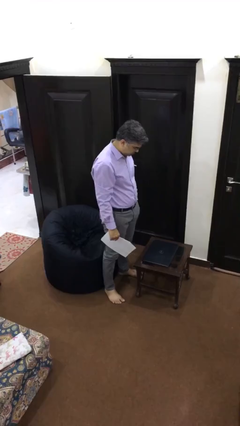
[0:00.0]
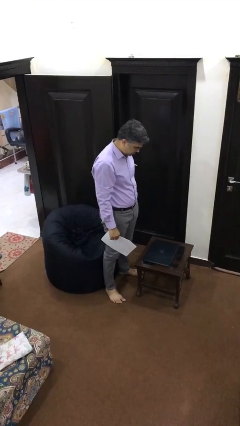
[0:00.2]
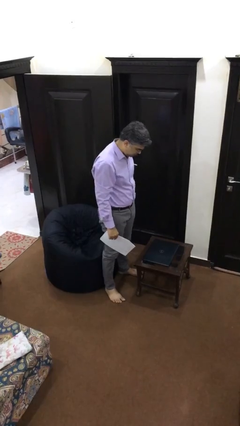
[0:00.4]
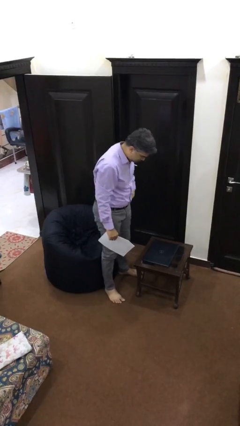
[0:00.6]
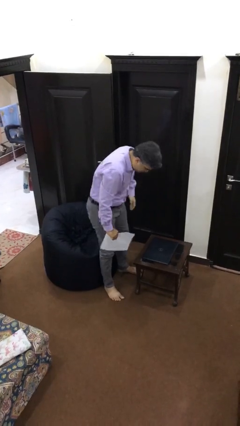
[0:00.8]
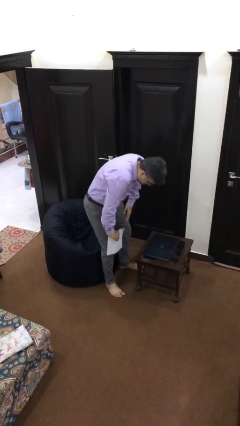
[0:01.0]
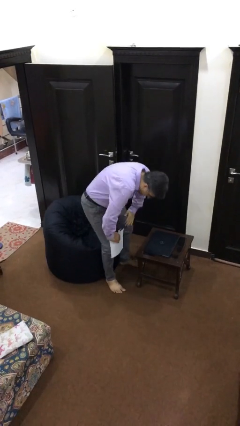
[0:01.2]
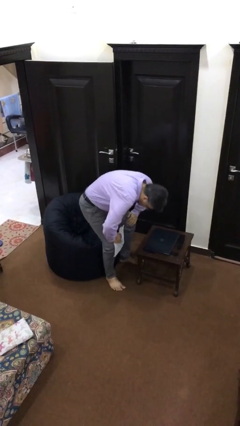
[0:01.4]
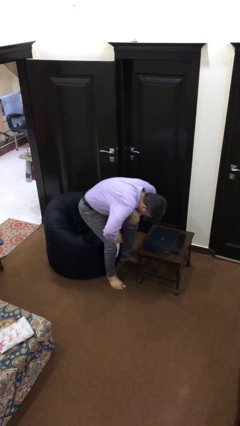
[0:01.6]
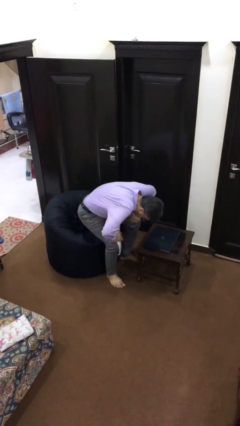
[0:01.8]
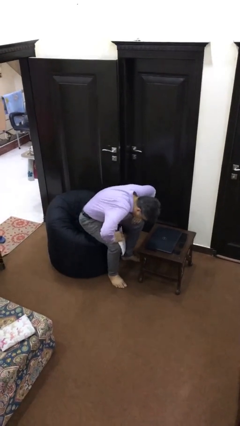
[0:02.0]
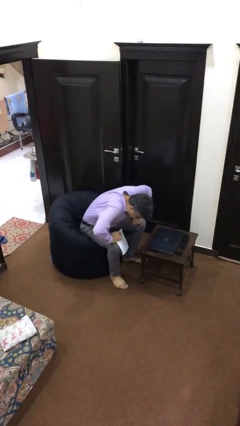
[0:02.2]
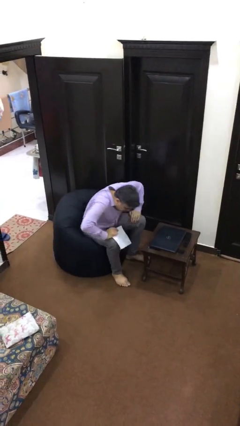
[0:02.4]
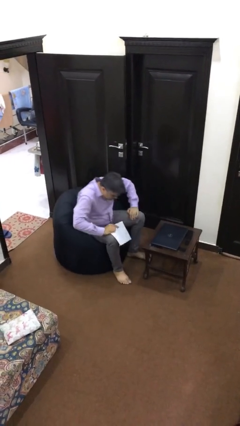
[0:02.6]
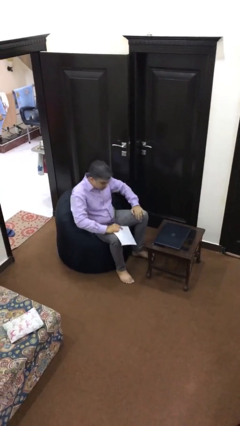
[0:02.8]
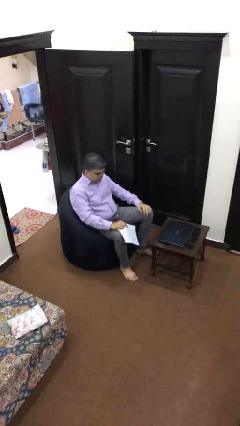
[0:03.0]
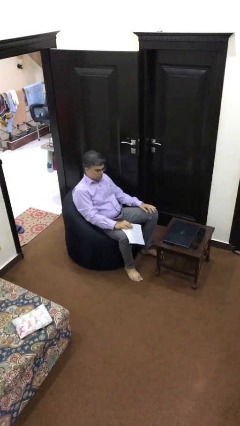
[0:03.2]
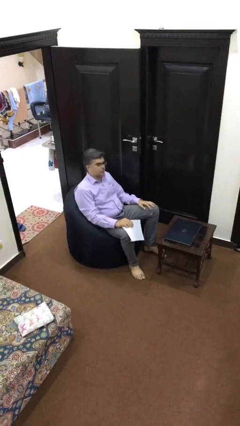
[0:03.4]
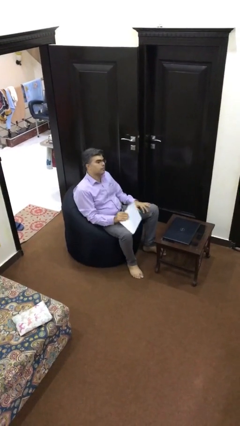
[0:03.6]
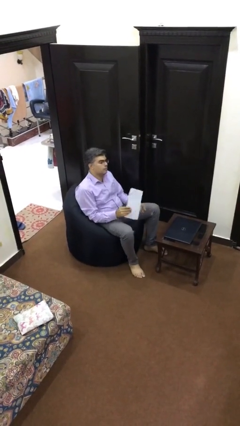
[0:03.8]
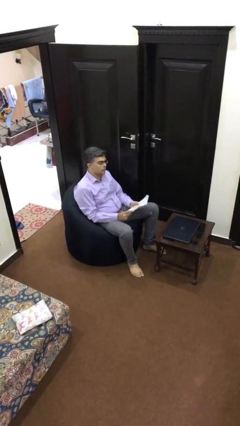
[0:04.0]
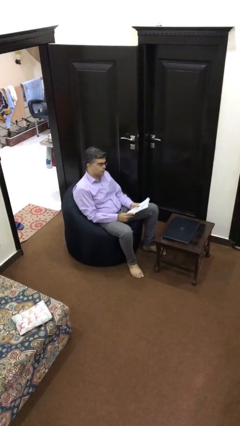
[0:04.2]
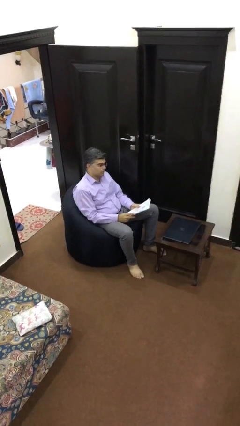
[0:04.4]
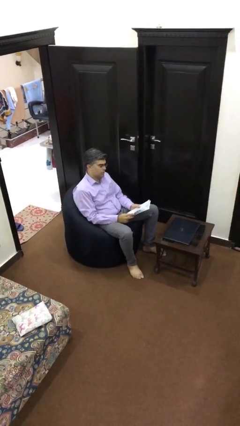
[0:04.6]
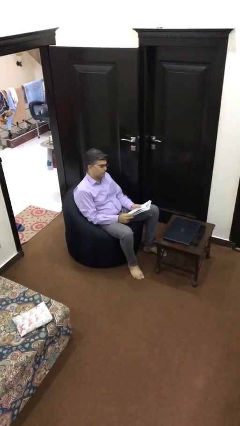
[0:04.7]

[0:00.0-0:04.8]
person sits down

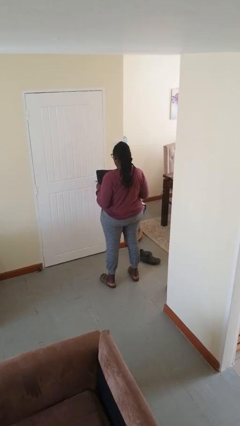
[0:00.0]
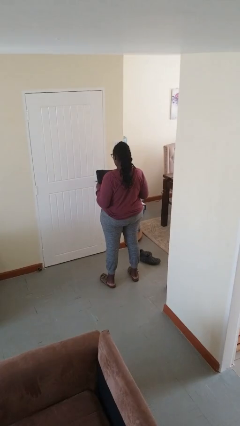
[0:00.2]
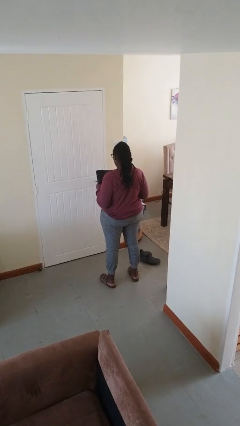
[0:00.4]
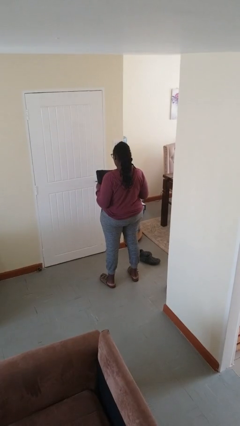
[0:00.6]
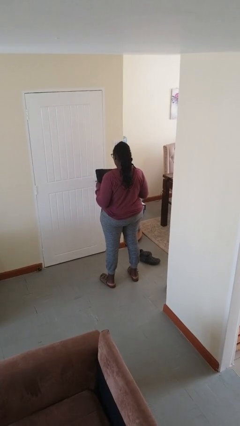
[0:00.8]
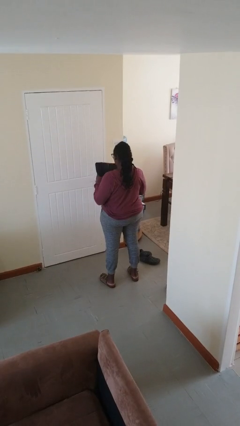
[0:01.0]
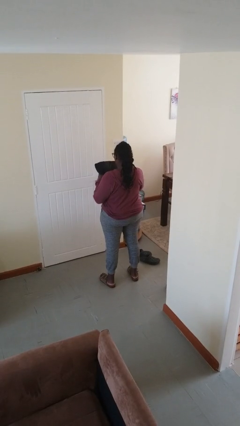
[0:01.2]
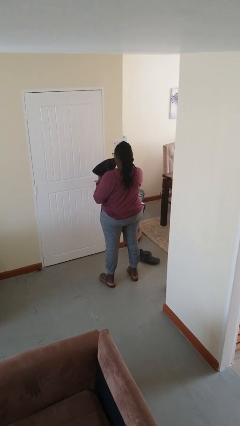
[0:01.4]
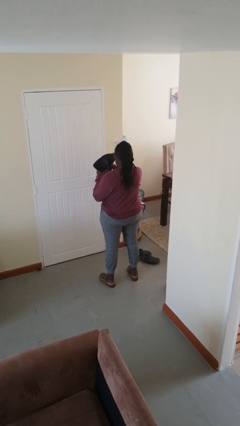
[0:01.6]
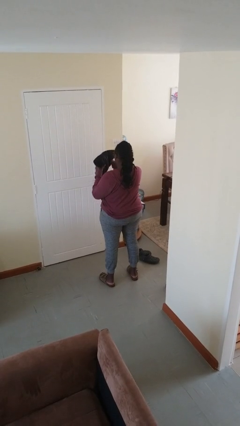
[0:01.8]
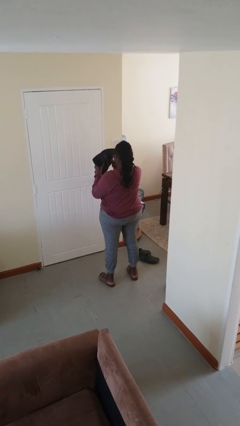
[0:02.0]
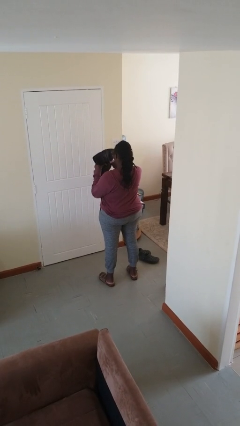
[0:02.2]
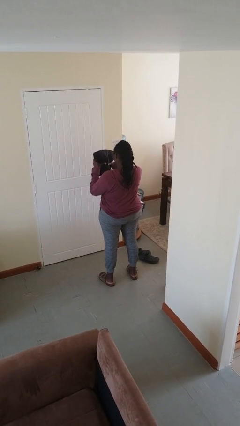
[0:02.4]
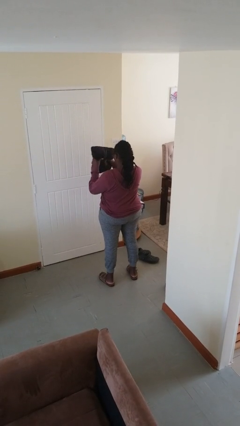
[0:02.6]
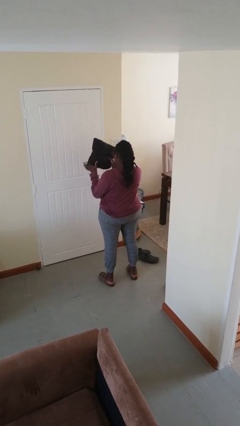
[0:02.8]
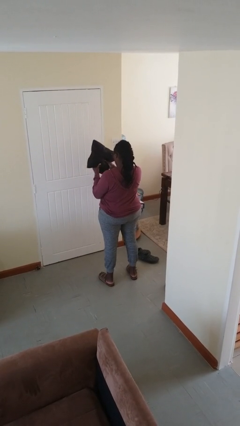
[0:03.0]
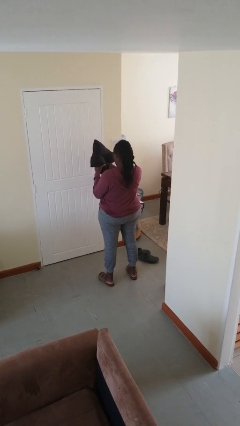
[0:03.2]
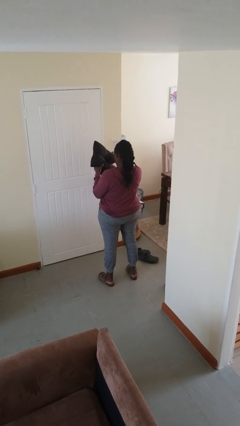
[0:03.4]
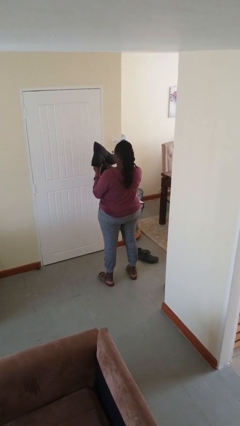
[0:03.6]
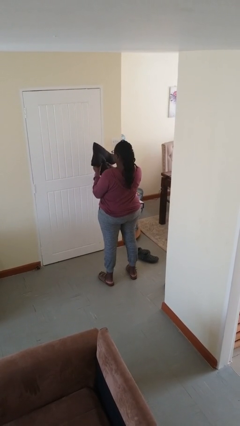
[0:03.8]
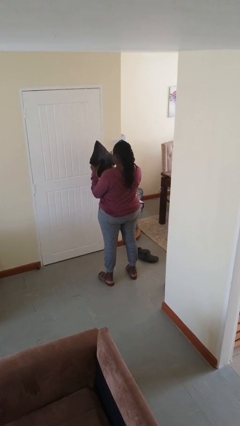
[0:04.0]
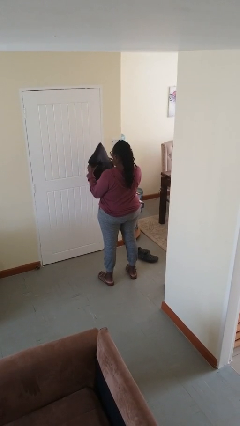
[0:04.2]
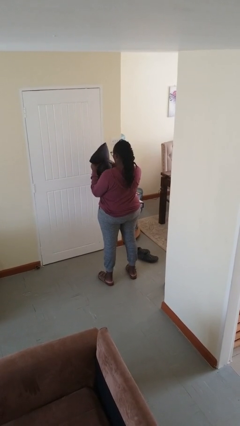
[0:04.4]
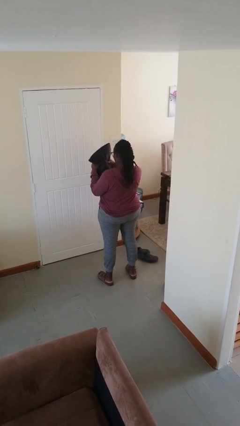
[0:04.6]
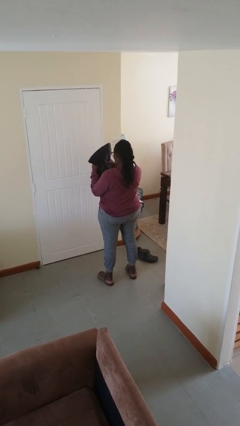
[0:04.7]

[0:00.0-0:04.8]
person squeezes object

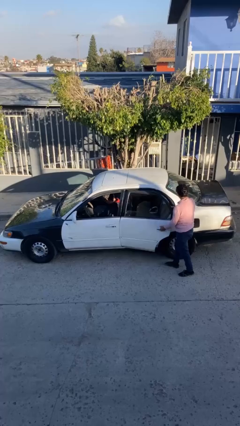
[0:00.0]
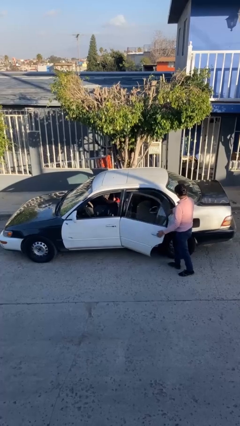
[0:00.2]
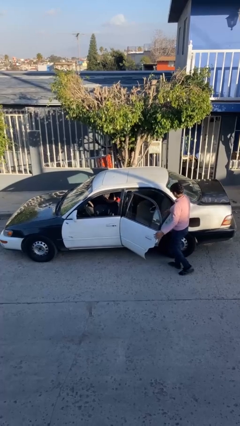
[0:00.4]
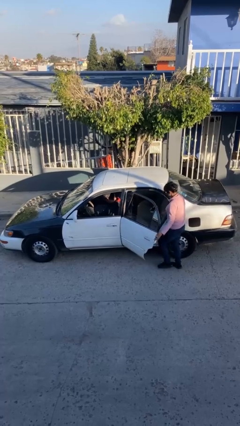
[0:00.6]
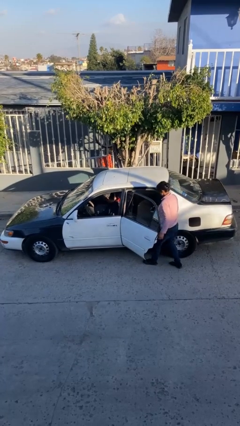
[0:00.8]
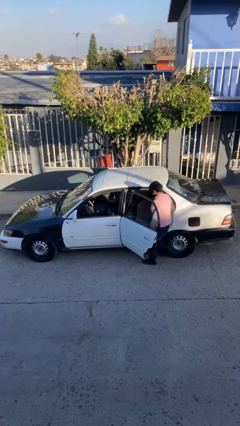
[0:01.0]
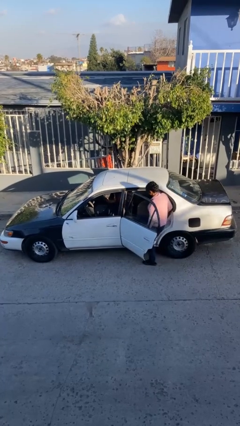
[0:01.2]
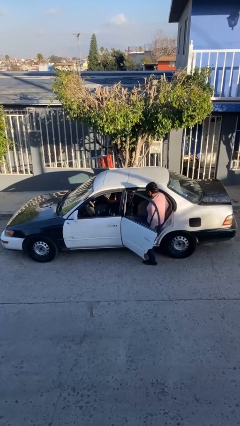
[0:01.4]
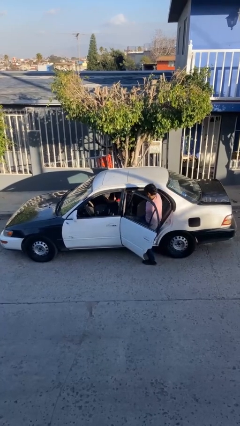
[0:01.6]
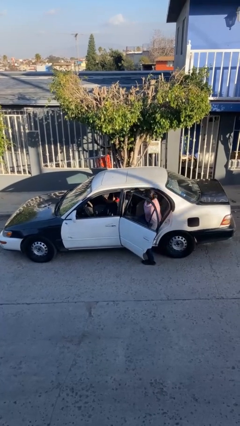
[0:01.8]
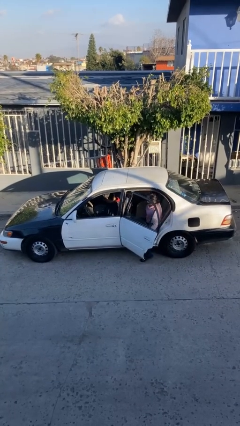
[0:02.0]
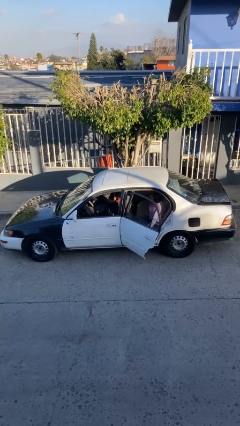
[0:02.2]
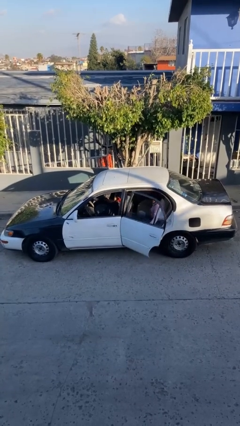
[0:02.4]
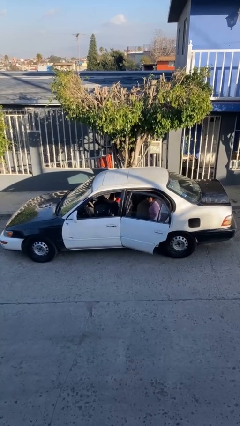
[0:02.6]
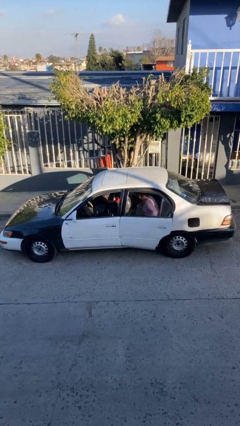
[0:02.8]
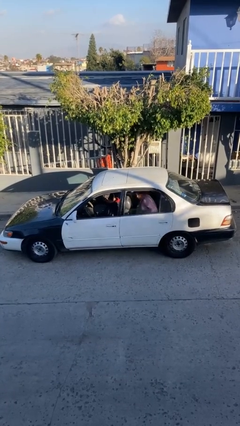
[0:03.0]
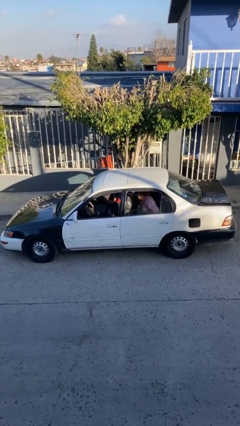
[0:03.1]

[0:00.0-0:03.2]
car picks up person

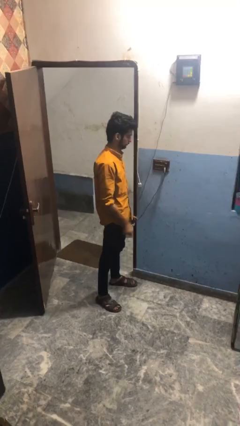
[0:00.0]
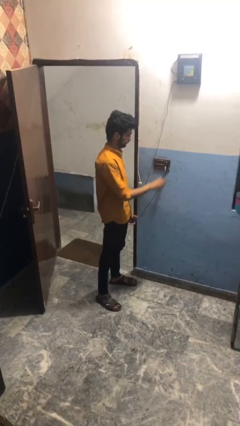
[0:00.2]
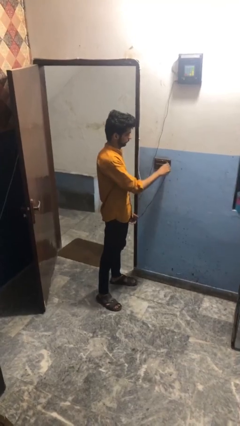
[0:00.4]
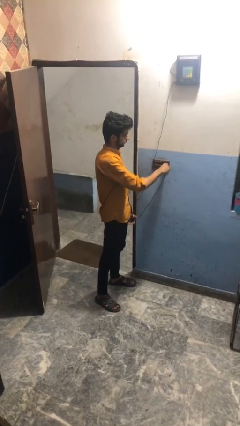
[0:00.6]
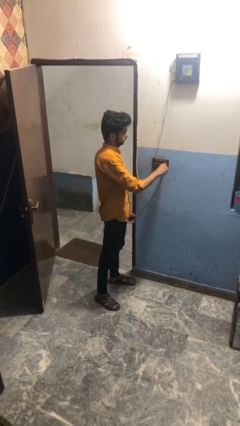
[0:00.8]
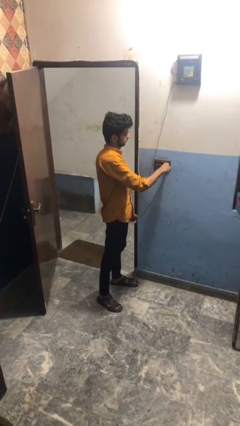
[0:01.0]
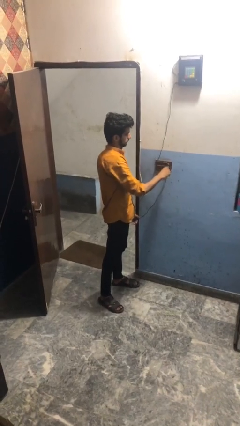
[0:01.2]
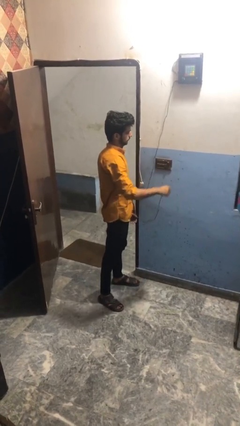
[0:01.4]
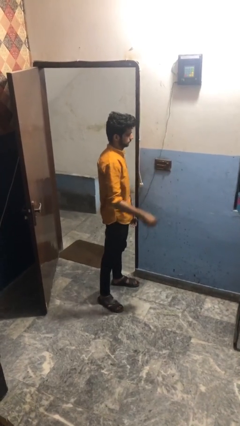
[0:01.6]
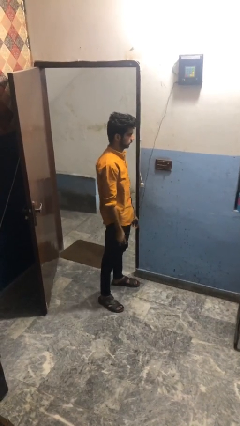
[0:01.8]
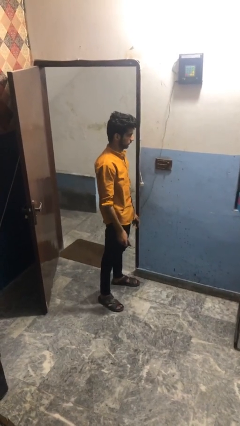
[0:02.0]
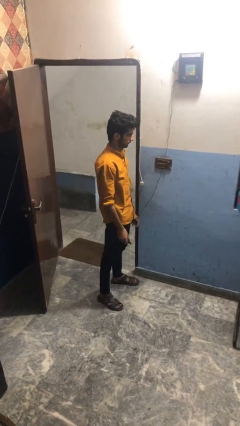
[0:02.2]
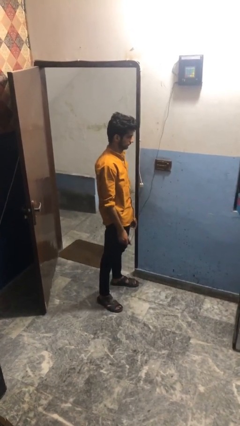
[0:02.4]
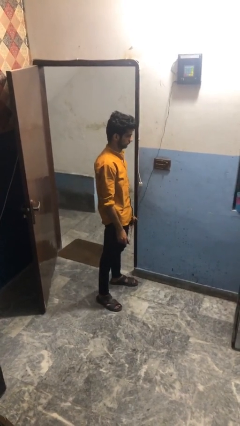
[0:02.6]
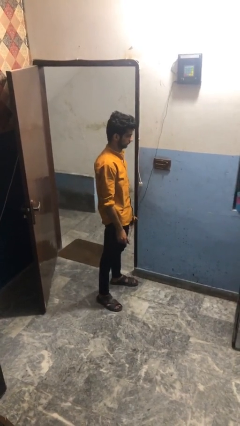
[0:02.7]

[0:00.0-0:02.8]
person unplugs from electrical socket

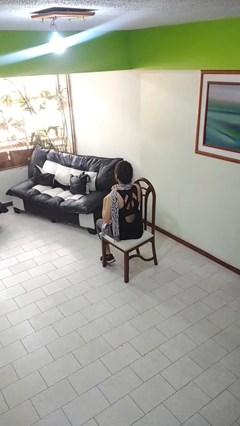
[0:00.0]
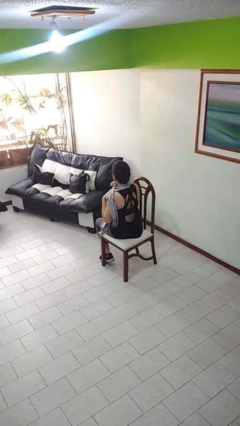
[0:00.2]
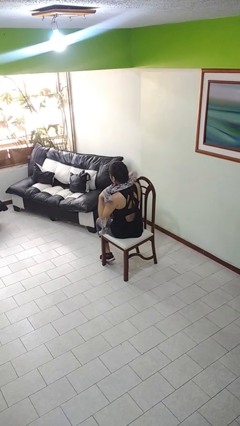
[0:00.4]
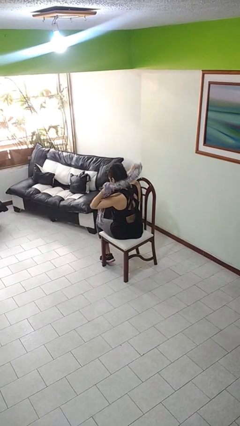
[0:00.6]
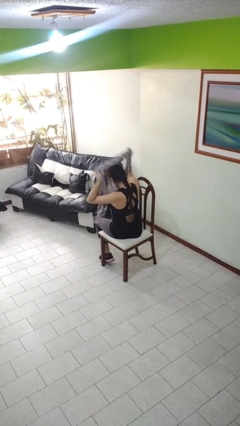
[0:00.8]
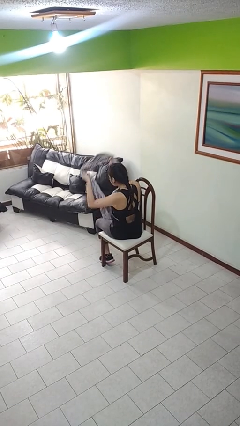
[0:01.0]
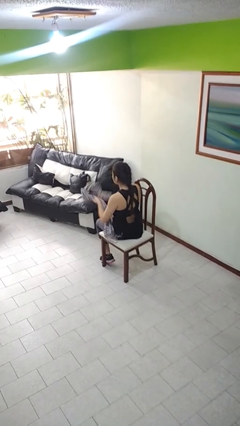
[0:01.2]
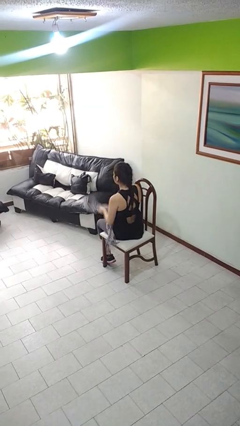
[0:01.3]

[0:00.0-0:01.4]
person takes off scarf

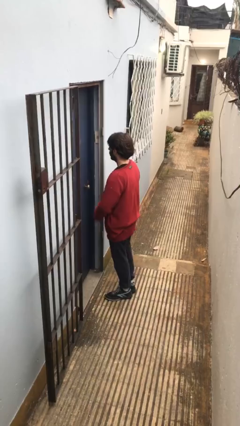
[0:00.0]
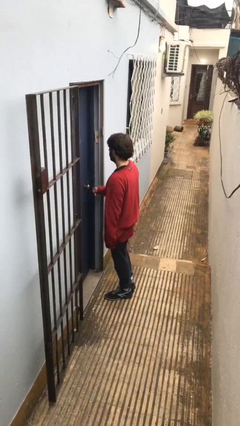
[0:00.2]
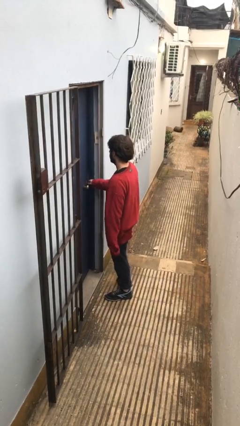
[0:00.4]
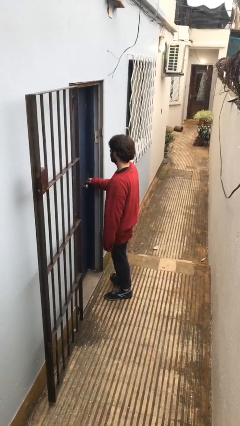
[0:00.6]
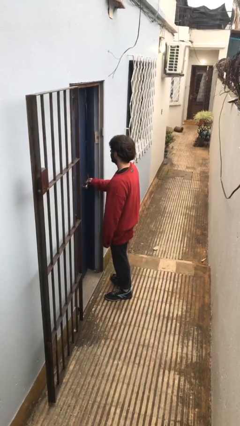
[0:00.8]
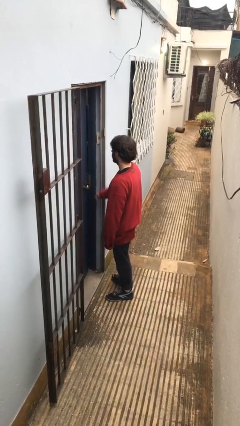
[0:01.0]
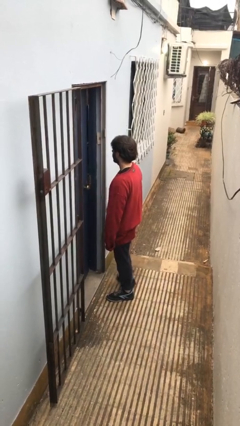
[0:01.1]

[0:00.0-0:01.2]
person locks door with keys
